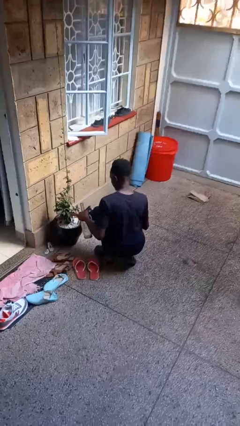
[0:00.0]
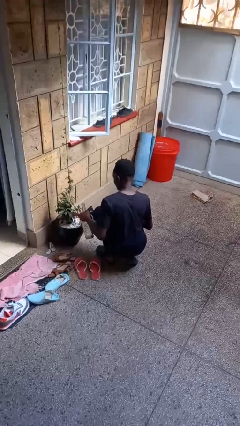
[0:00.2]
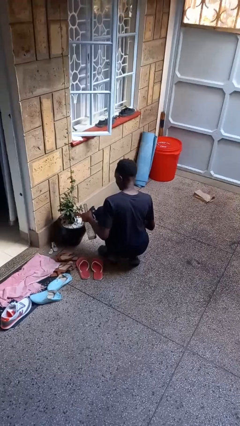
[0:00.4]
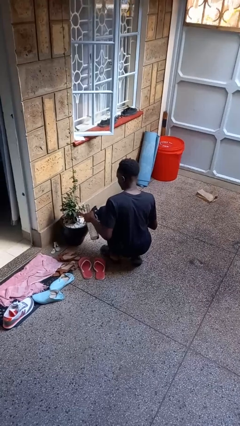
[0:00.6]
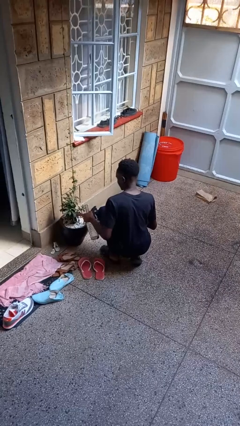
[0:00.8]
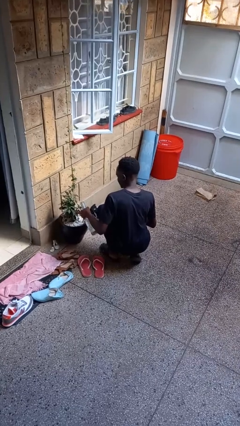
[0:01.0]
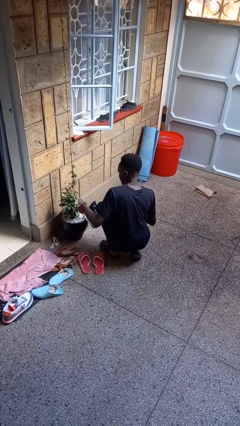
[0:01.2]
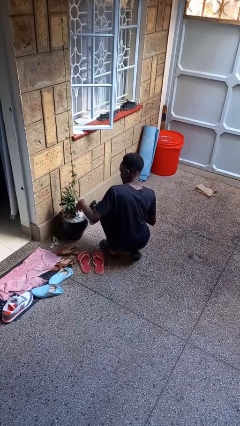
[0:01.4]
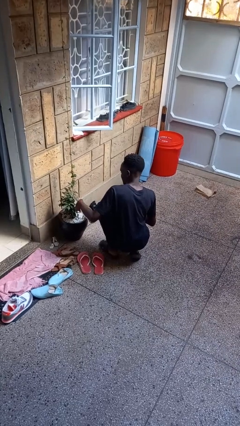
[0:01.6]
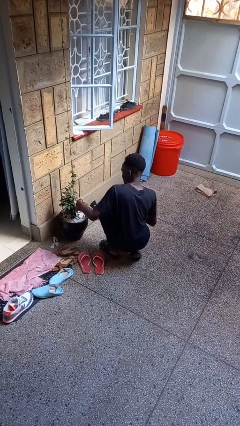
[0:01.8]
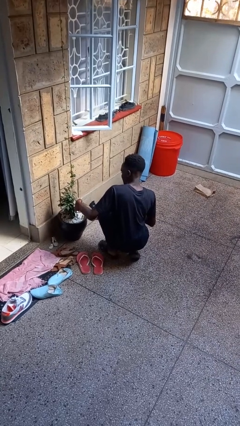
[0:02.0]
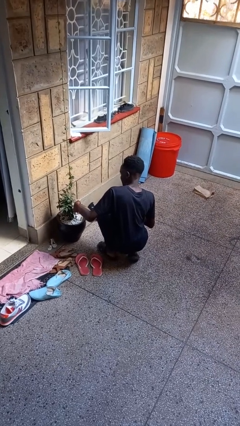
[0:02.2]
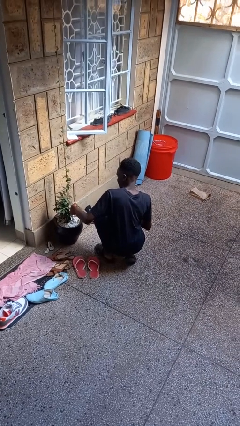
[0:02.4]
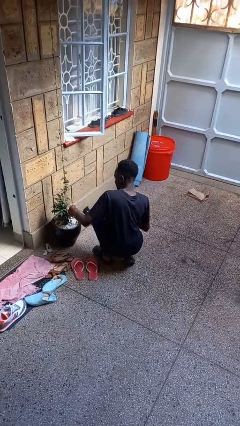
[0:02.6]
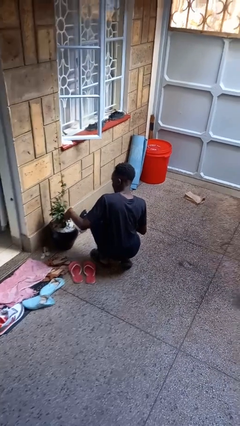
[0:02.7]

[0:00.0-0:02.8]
person waters houseplant

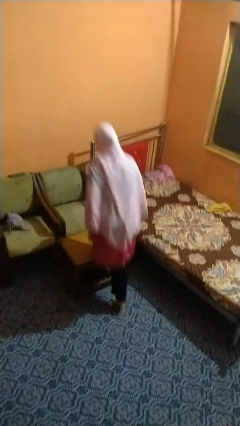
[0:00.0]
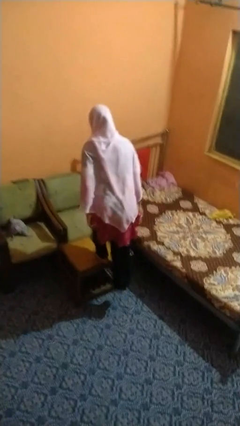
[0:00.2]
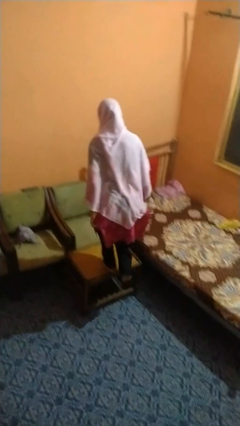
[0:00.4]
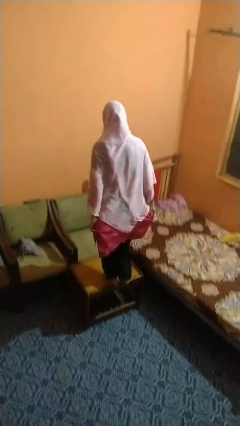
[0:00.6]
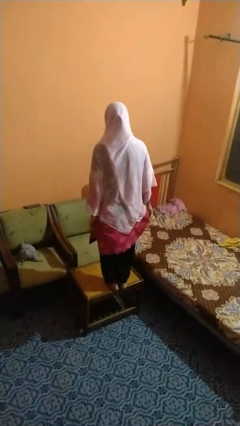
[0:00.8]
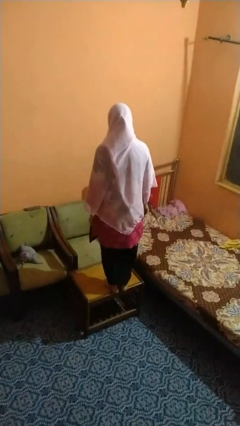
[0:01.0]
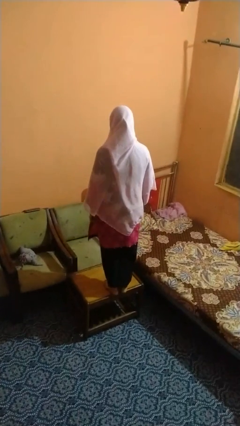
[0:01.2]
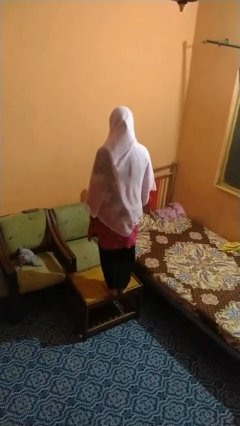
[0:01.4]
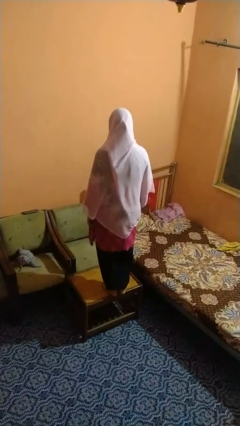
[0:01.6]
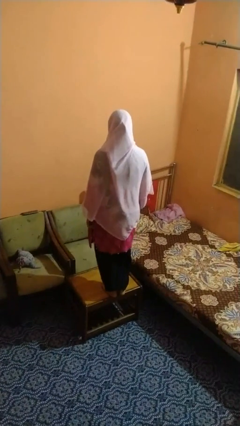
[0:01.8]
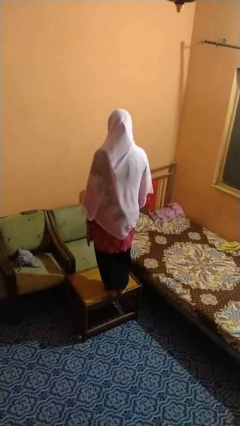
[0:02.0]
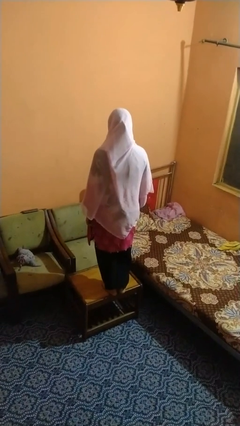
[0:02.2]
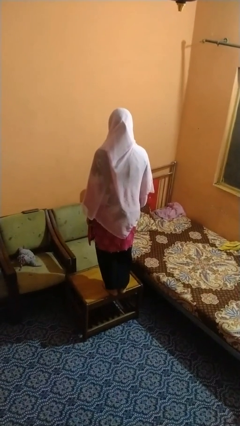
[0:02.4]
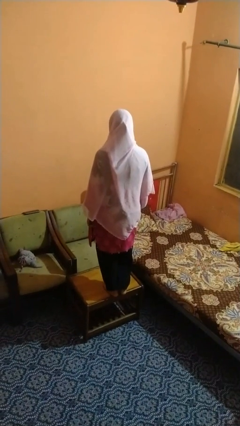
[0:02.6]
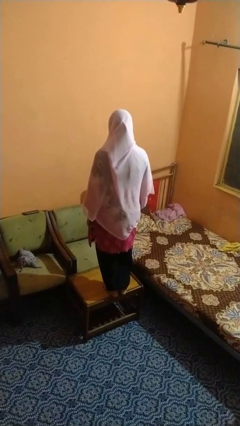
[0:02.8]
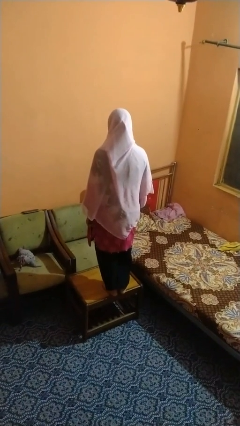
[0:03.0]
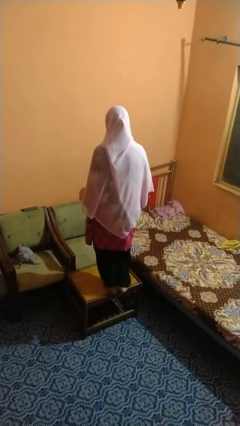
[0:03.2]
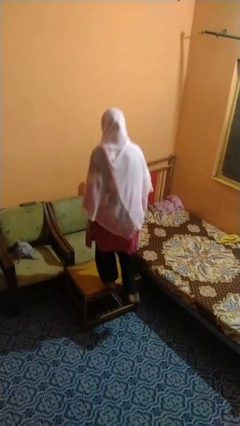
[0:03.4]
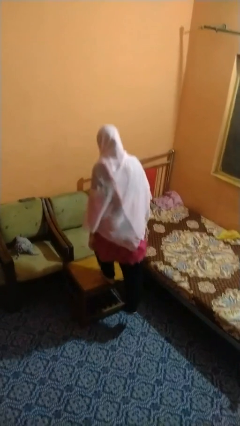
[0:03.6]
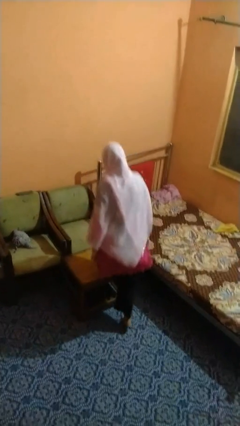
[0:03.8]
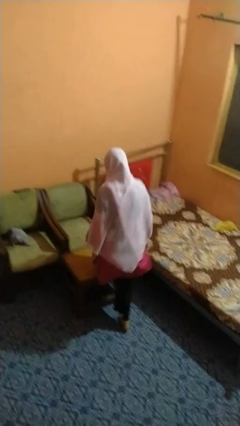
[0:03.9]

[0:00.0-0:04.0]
person climbs on table

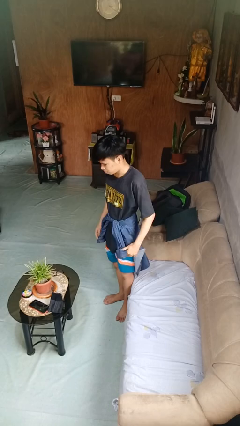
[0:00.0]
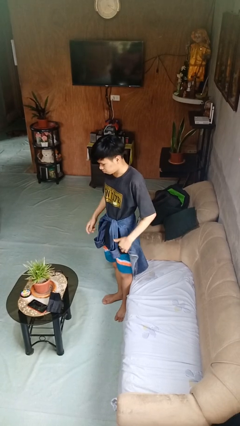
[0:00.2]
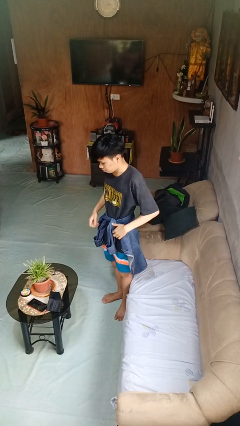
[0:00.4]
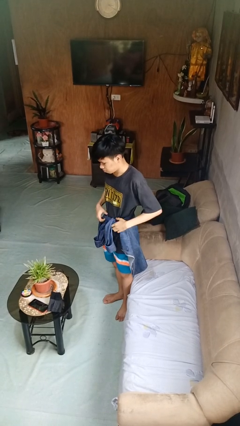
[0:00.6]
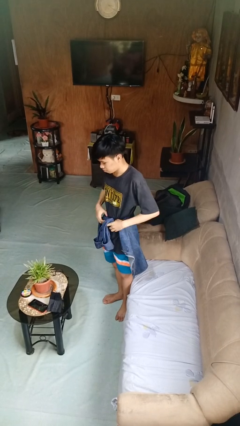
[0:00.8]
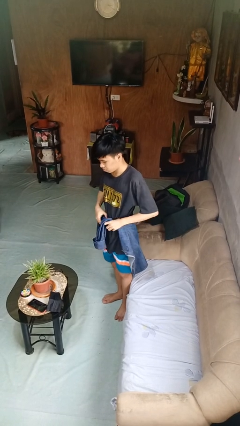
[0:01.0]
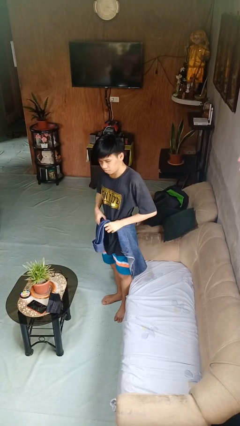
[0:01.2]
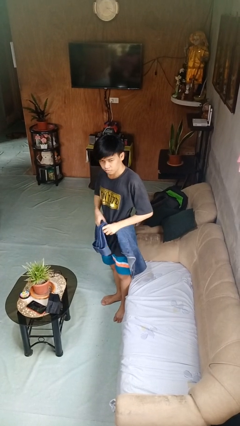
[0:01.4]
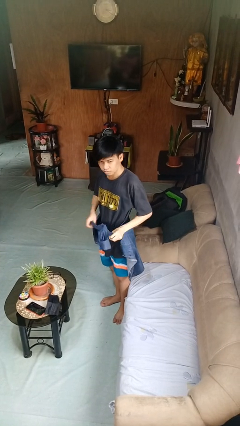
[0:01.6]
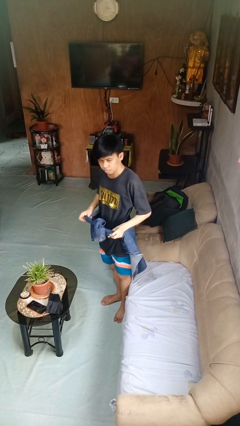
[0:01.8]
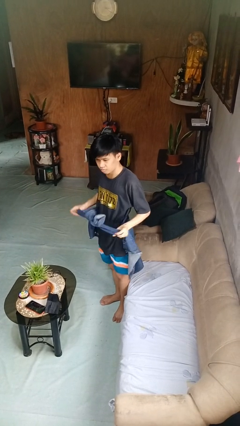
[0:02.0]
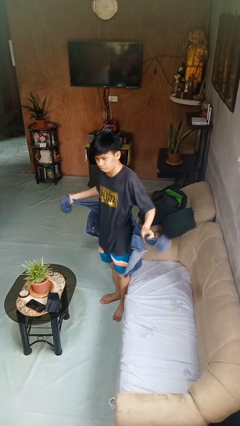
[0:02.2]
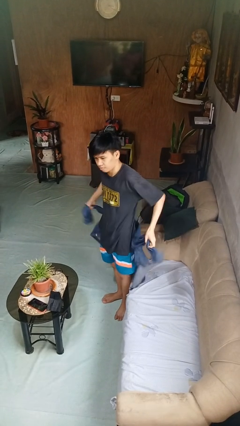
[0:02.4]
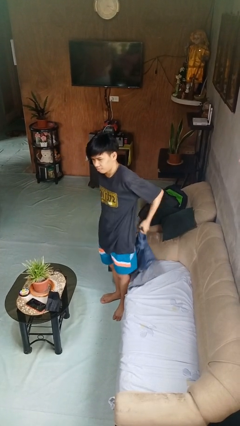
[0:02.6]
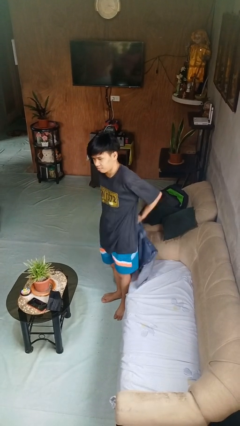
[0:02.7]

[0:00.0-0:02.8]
person unties jacket around waist

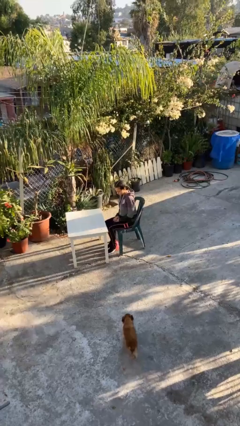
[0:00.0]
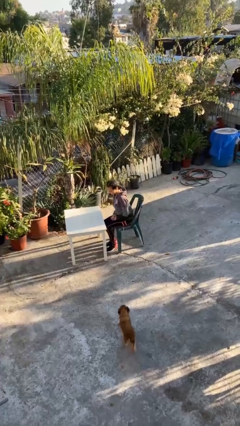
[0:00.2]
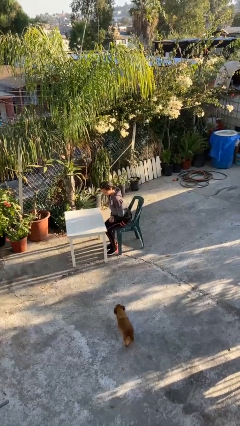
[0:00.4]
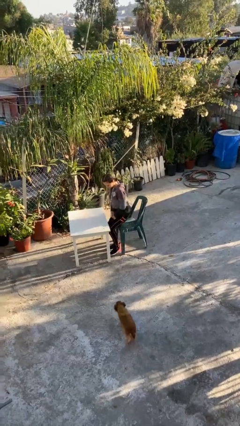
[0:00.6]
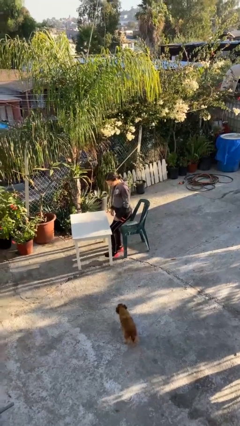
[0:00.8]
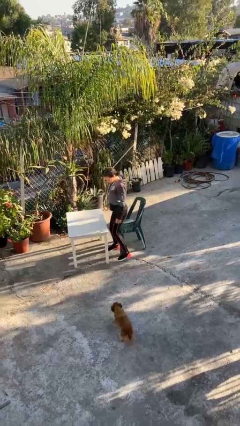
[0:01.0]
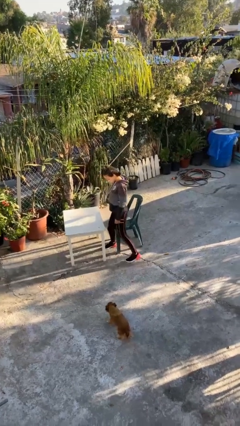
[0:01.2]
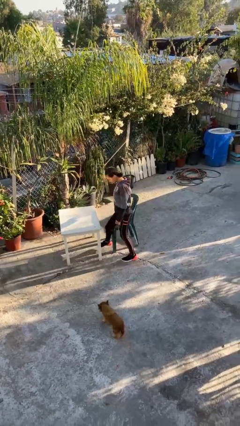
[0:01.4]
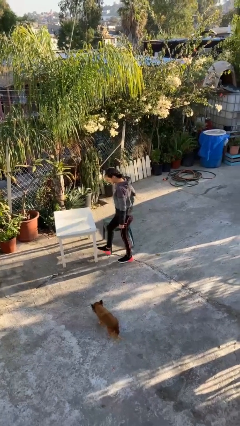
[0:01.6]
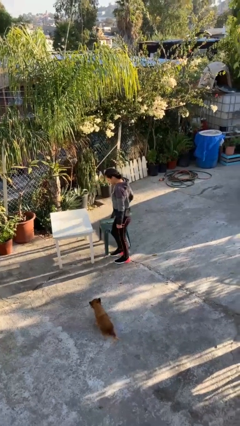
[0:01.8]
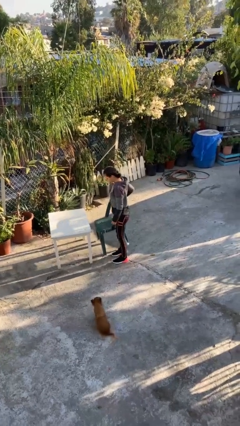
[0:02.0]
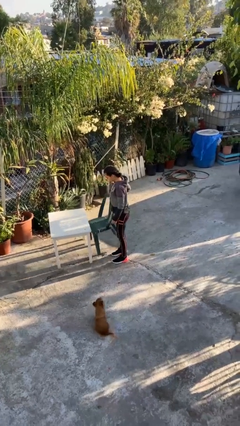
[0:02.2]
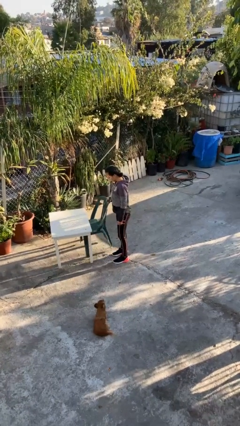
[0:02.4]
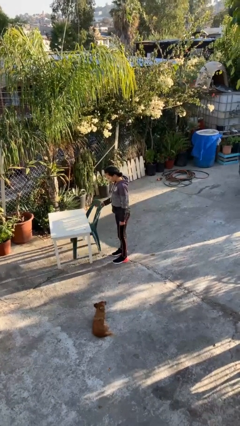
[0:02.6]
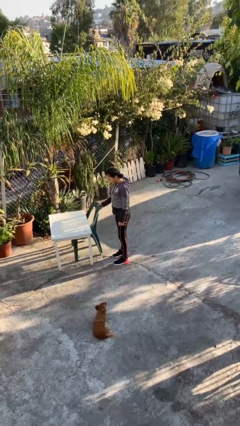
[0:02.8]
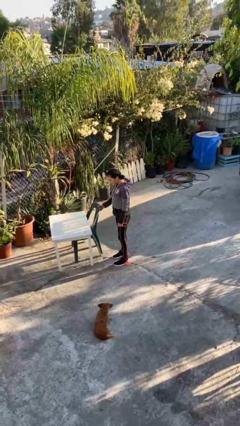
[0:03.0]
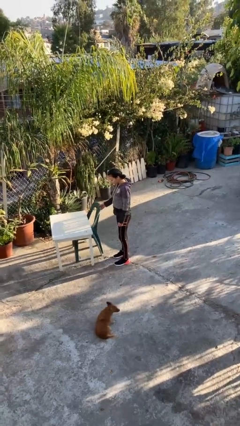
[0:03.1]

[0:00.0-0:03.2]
person stands up

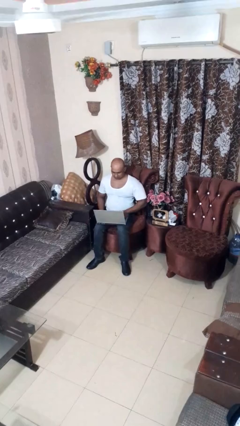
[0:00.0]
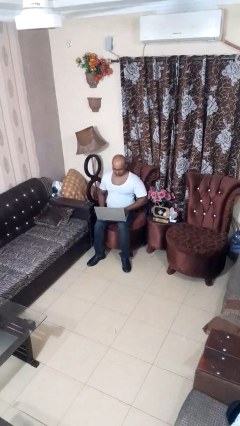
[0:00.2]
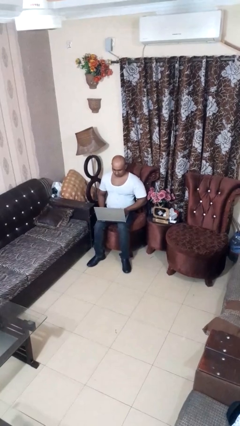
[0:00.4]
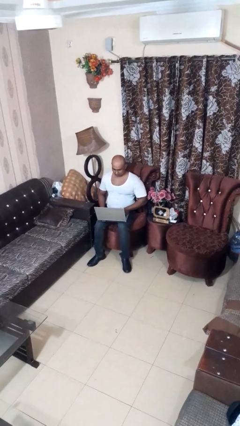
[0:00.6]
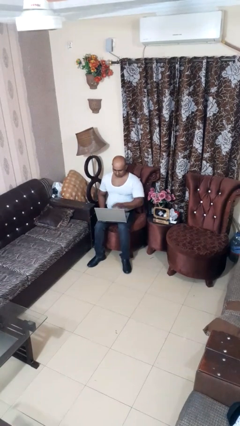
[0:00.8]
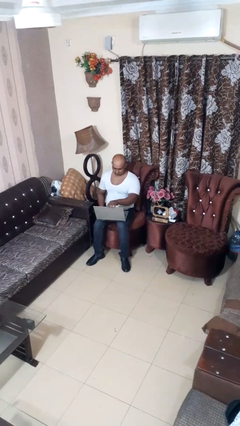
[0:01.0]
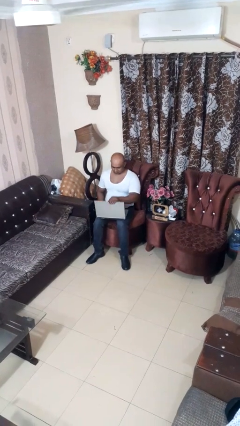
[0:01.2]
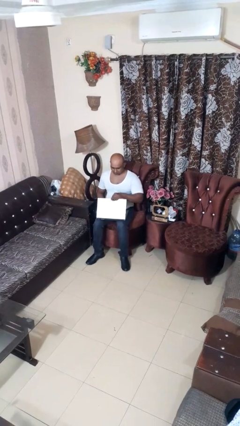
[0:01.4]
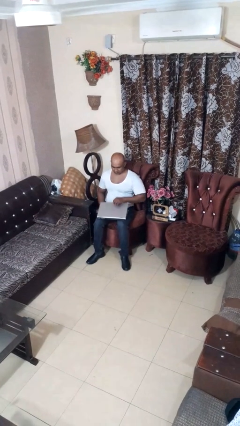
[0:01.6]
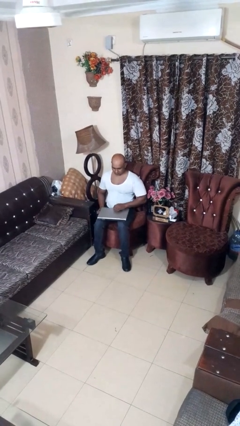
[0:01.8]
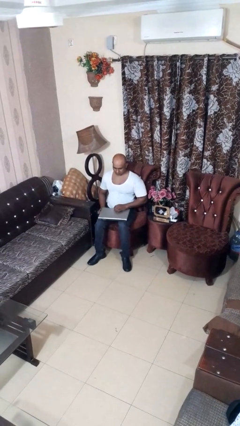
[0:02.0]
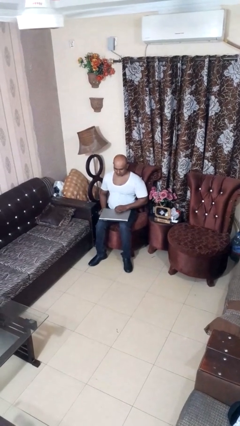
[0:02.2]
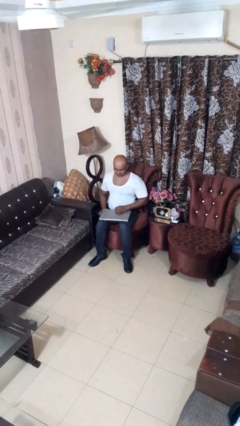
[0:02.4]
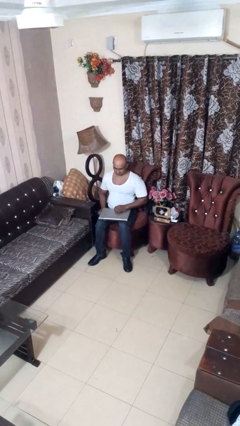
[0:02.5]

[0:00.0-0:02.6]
person closes laptop

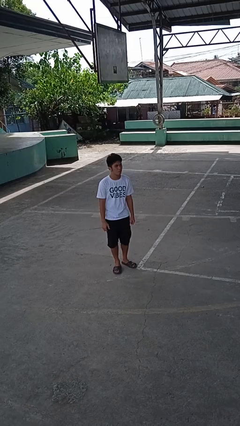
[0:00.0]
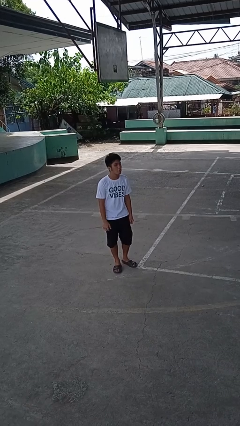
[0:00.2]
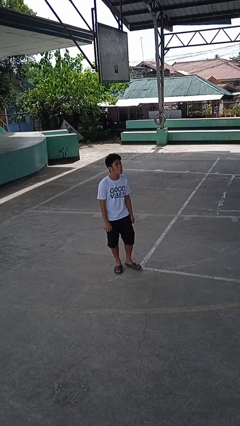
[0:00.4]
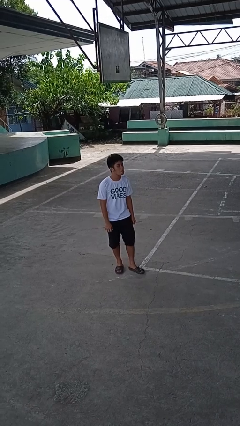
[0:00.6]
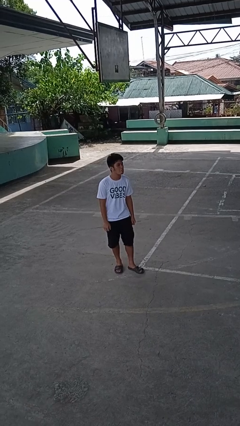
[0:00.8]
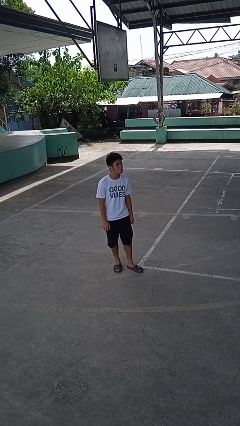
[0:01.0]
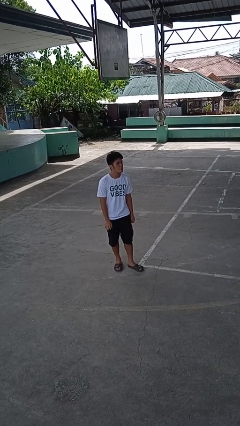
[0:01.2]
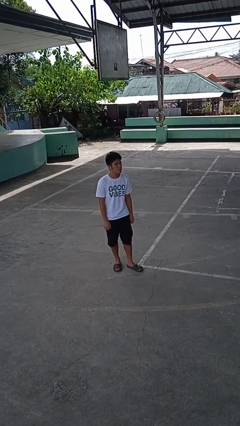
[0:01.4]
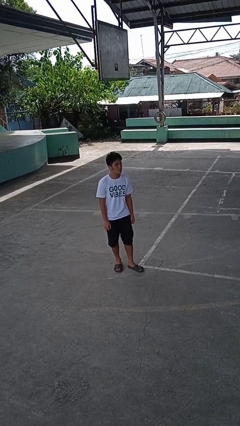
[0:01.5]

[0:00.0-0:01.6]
person sticks out tongue

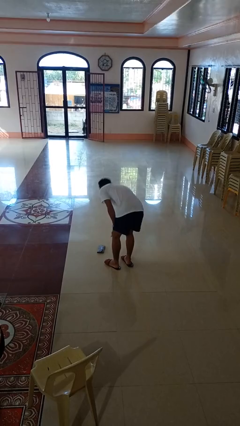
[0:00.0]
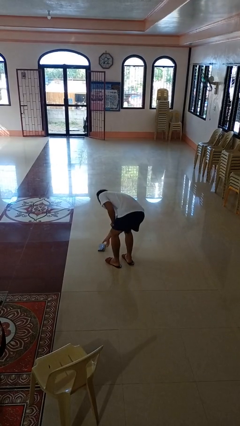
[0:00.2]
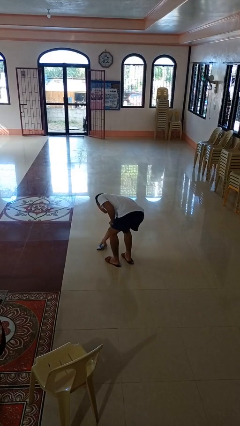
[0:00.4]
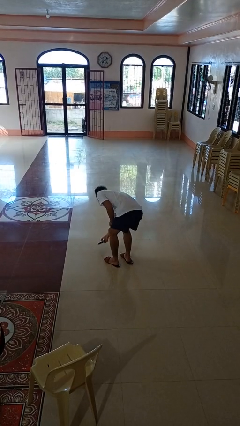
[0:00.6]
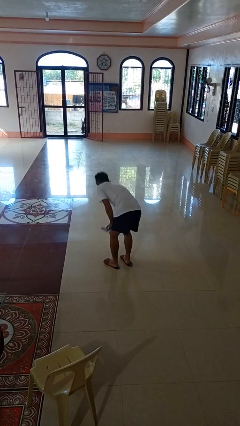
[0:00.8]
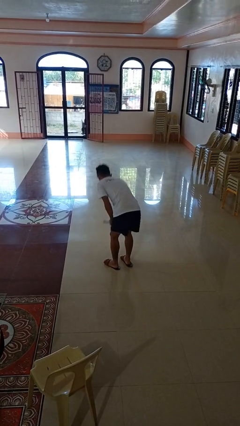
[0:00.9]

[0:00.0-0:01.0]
person picks up object from floor
